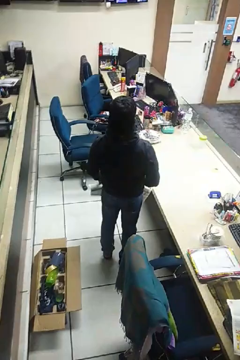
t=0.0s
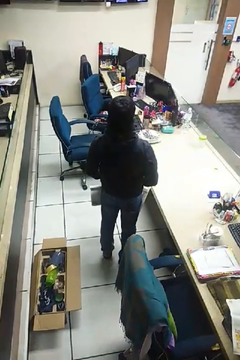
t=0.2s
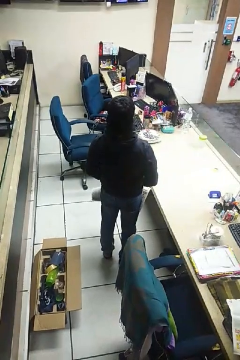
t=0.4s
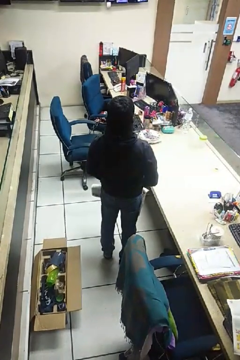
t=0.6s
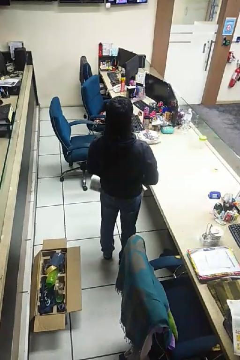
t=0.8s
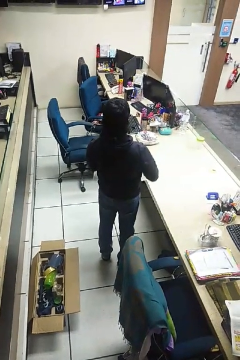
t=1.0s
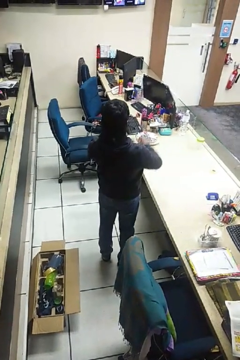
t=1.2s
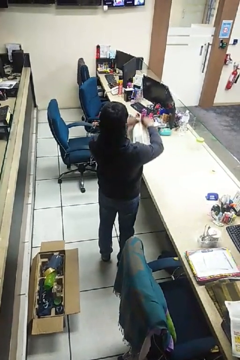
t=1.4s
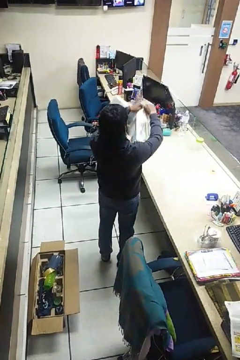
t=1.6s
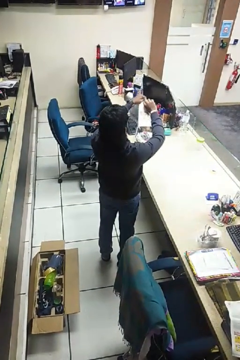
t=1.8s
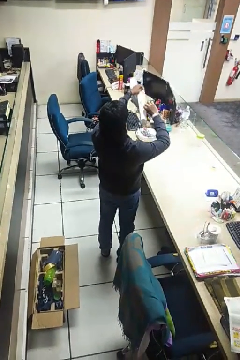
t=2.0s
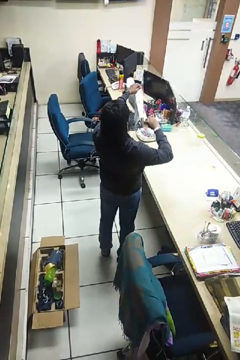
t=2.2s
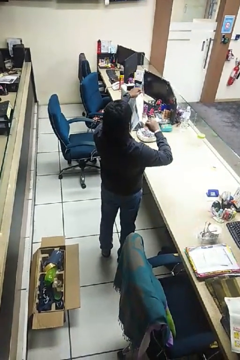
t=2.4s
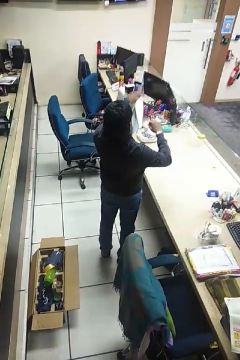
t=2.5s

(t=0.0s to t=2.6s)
person tears paper

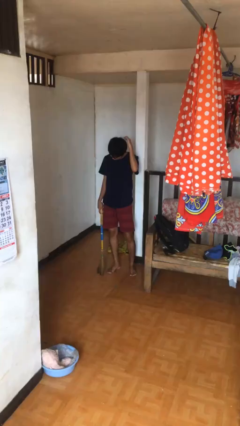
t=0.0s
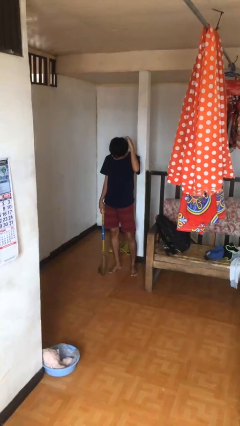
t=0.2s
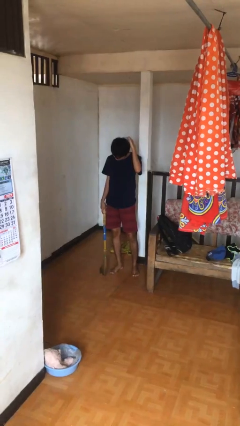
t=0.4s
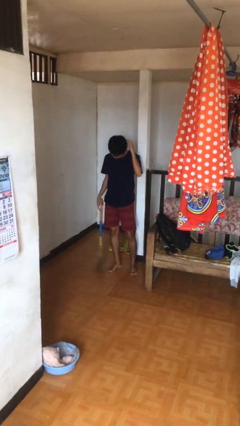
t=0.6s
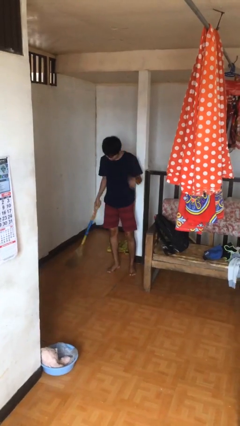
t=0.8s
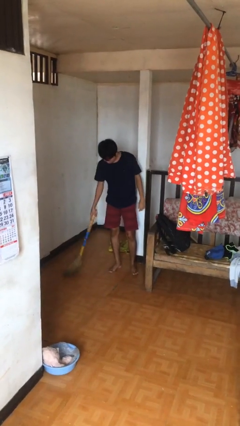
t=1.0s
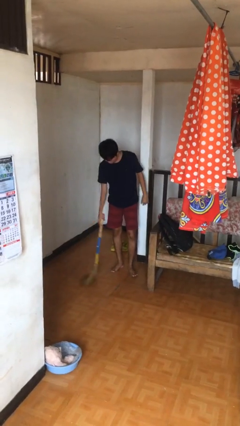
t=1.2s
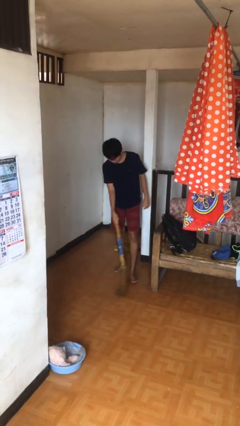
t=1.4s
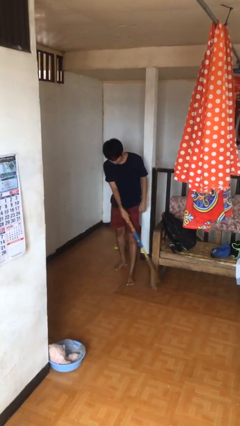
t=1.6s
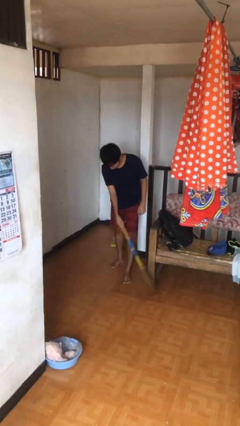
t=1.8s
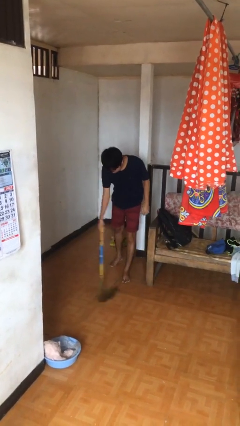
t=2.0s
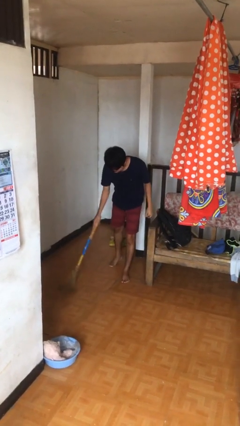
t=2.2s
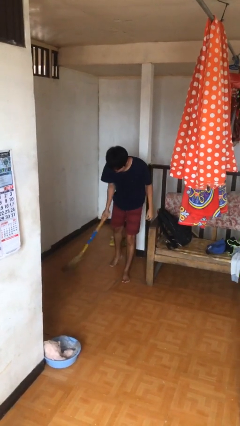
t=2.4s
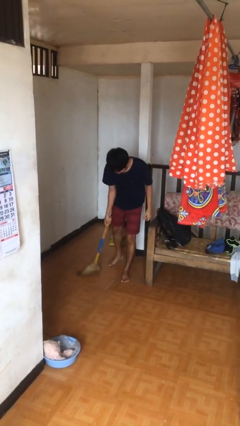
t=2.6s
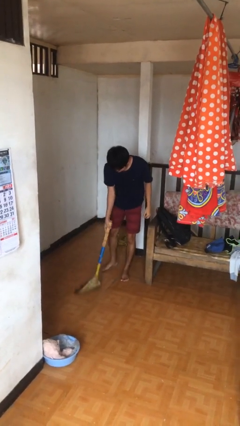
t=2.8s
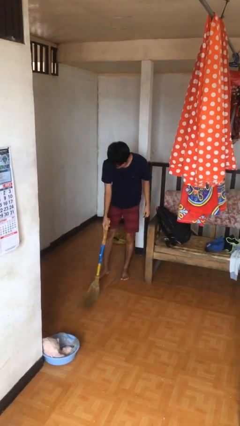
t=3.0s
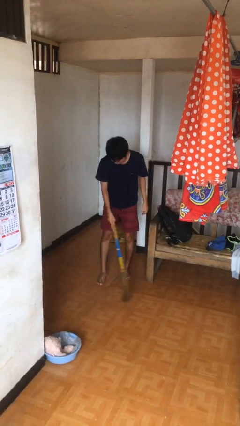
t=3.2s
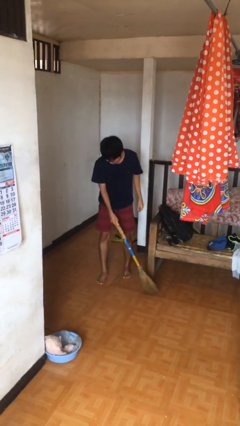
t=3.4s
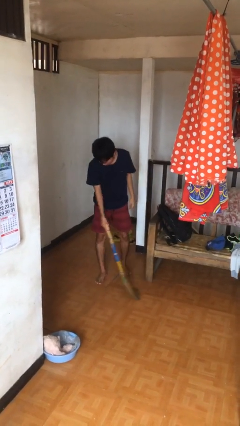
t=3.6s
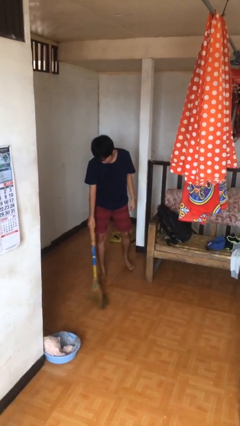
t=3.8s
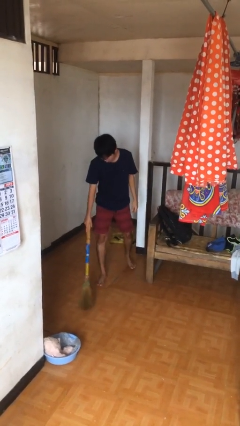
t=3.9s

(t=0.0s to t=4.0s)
person sweeps floor

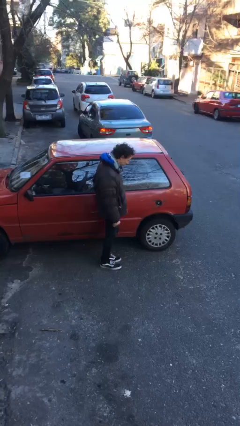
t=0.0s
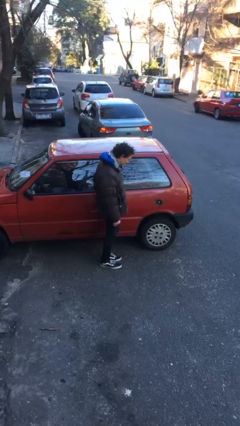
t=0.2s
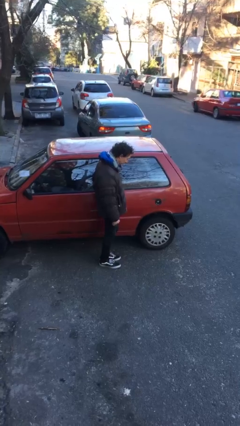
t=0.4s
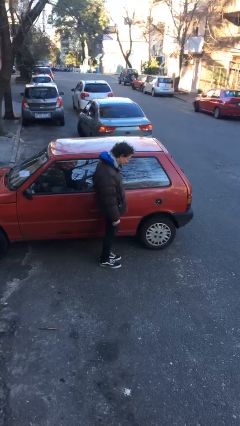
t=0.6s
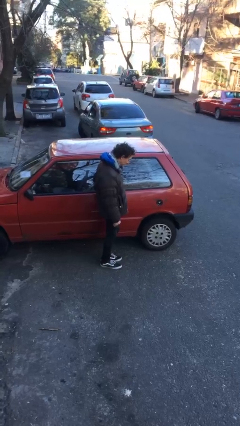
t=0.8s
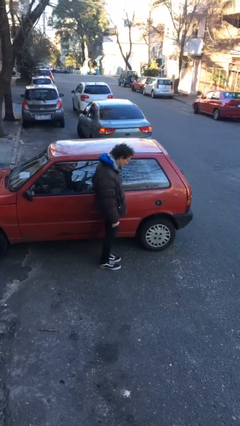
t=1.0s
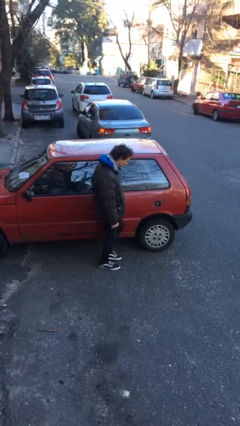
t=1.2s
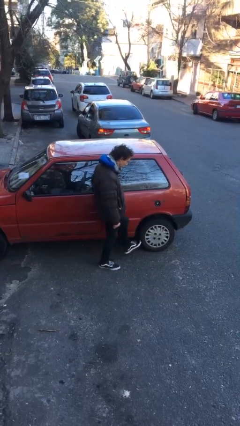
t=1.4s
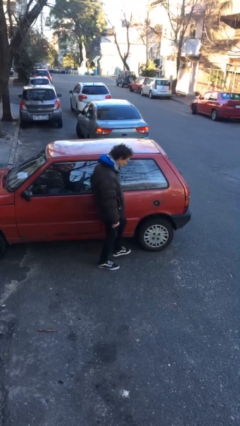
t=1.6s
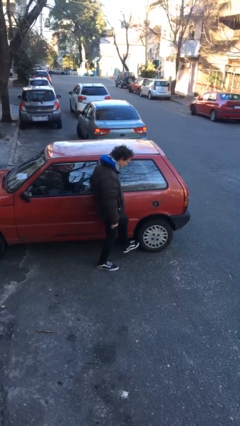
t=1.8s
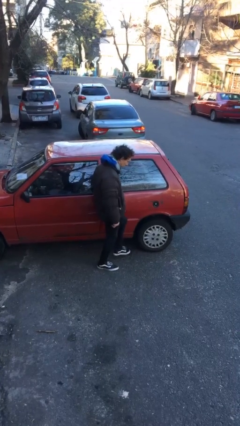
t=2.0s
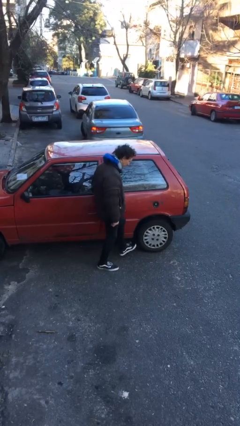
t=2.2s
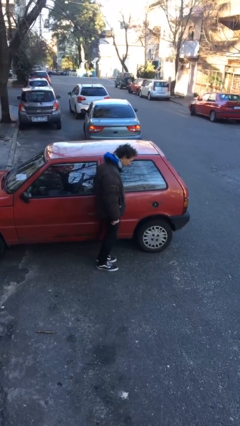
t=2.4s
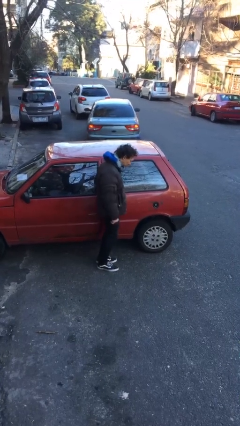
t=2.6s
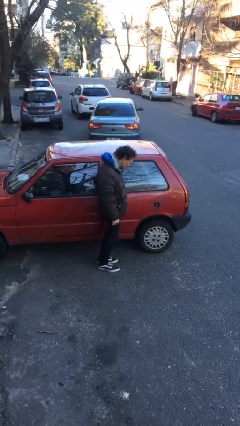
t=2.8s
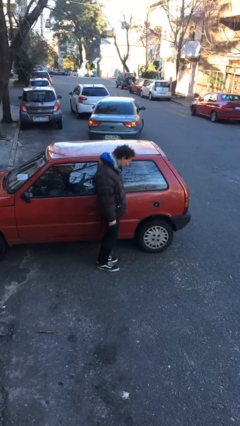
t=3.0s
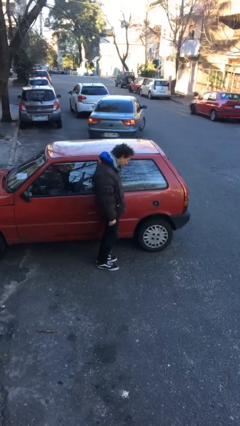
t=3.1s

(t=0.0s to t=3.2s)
person kicks car tires

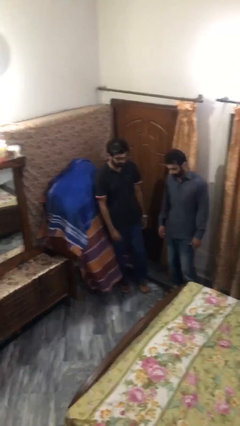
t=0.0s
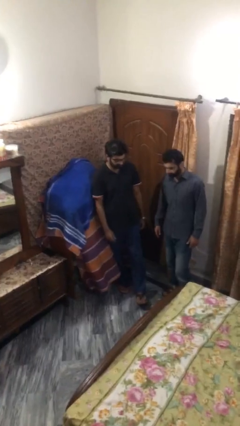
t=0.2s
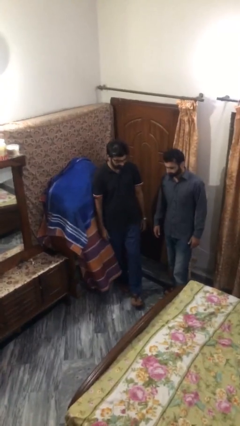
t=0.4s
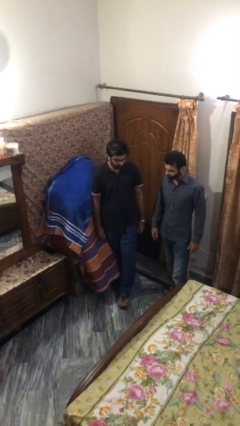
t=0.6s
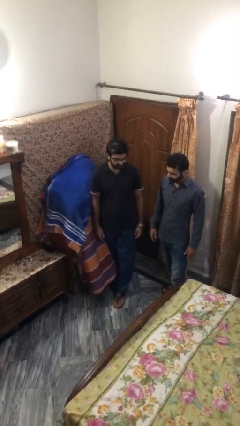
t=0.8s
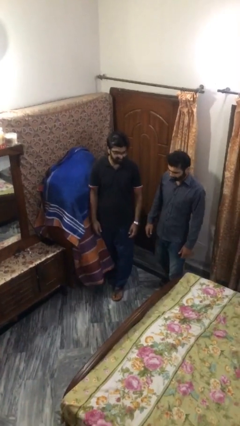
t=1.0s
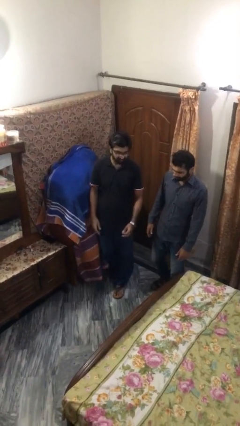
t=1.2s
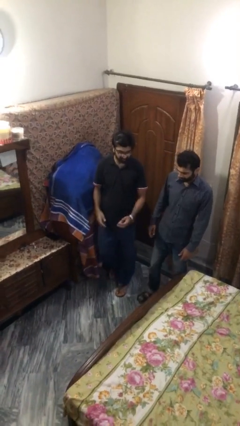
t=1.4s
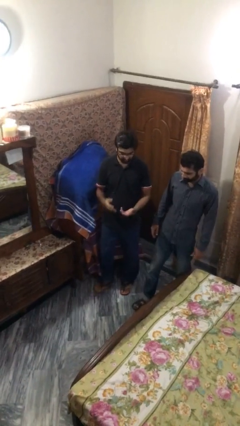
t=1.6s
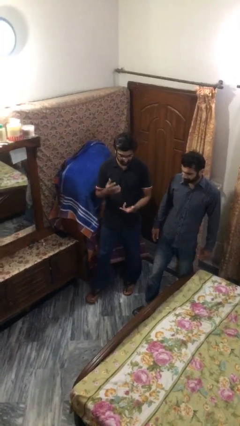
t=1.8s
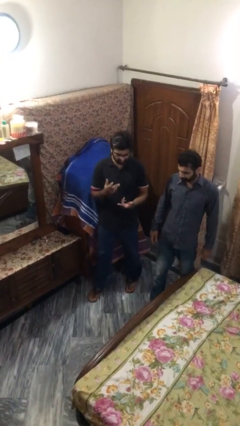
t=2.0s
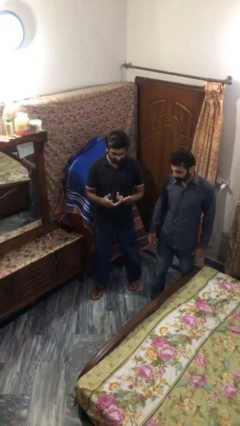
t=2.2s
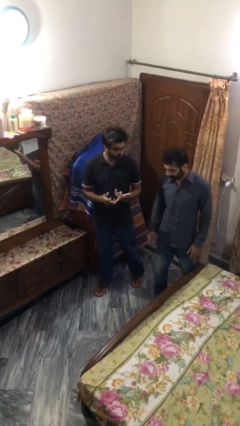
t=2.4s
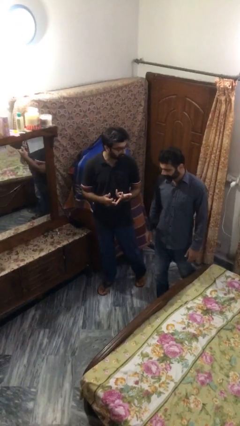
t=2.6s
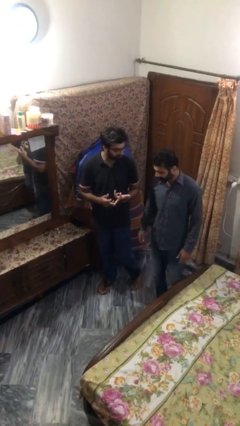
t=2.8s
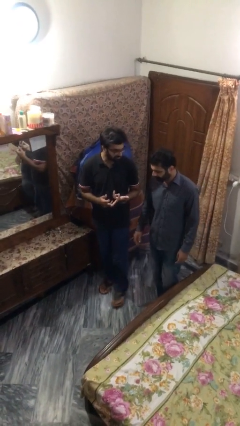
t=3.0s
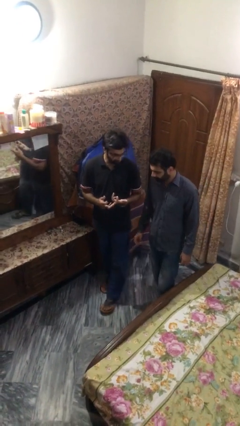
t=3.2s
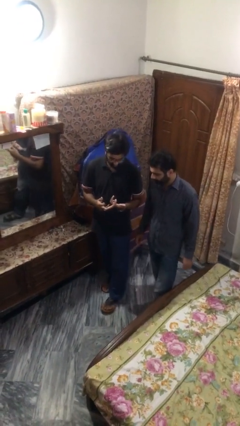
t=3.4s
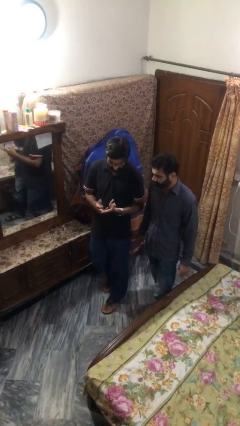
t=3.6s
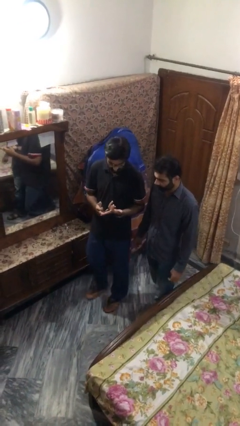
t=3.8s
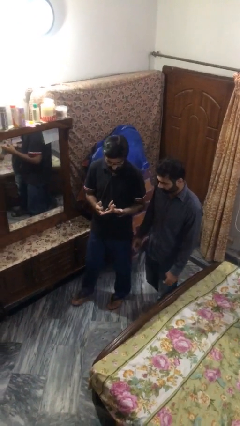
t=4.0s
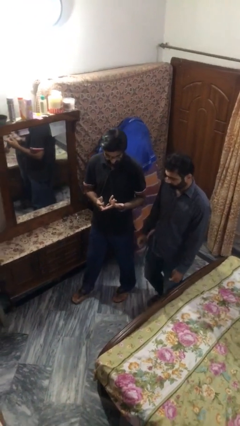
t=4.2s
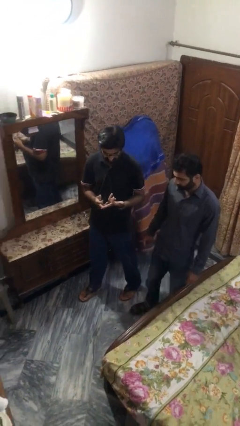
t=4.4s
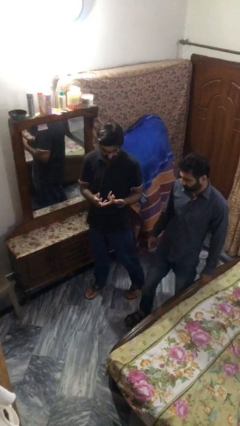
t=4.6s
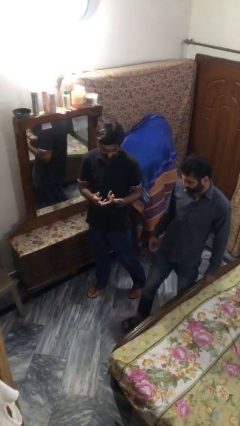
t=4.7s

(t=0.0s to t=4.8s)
person talks to person

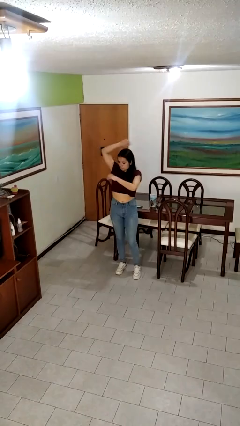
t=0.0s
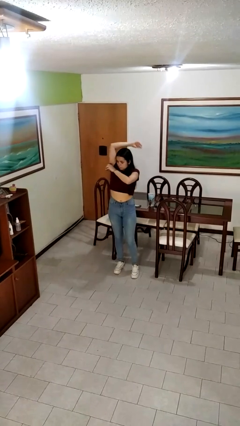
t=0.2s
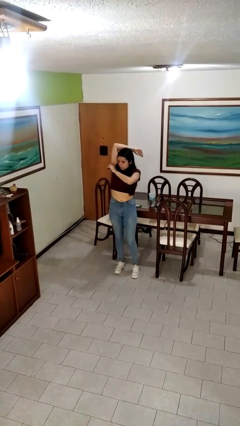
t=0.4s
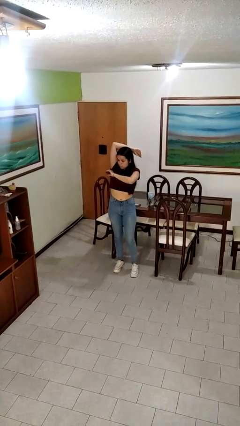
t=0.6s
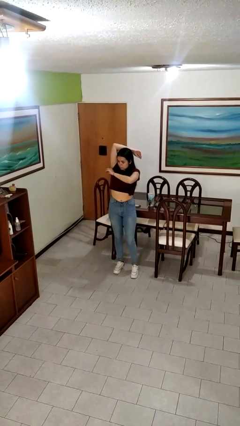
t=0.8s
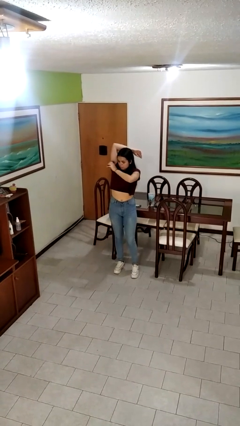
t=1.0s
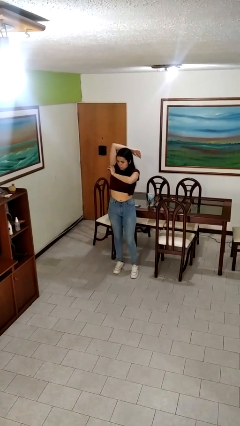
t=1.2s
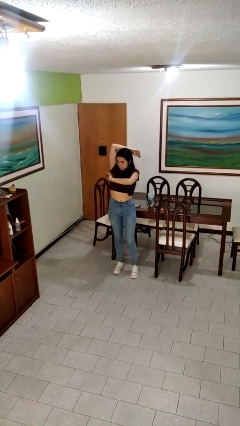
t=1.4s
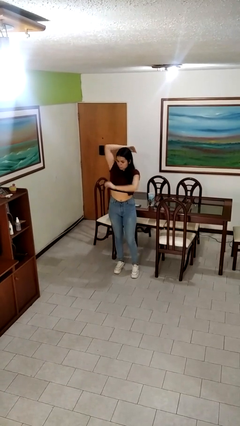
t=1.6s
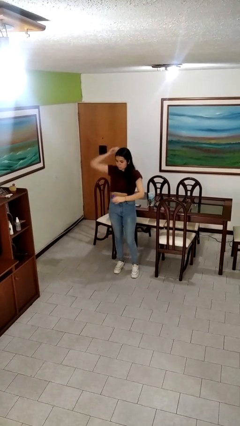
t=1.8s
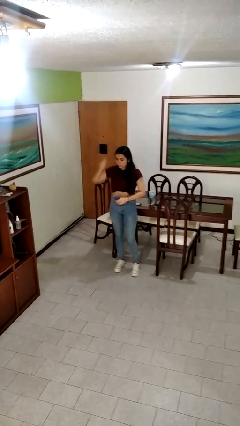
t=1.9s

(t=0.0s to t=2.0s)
person applies deodorant

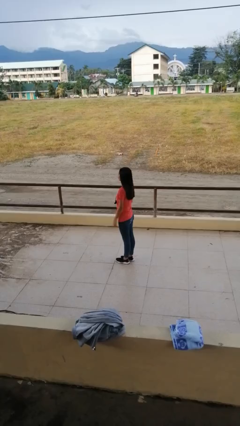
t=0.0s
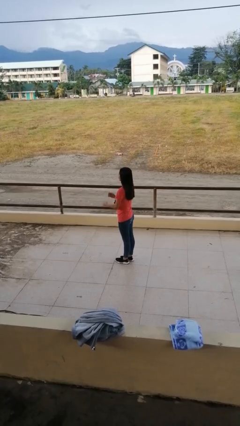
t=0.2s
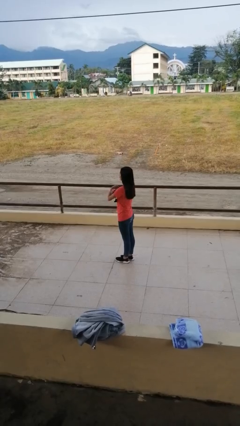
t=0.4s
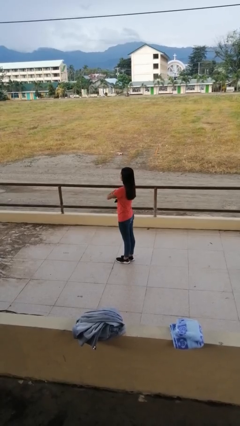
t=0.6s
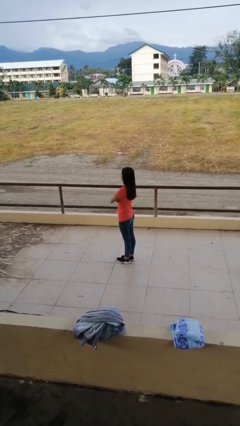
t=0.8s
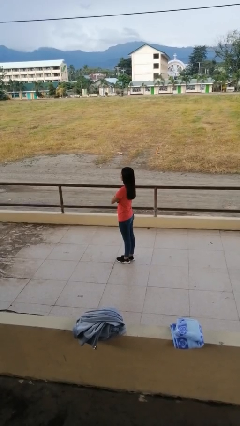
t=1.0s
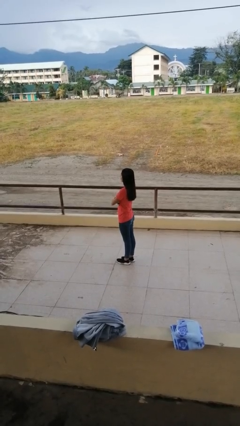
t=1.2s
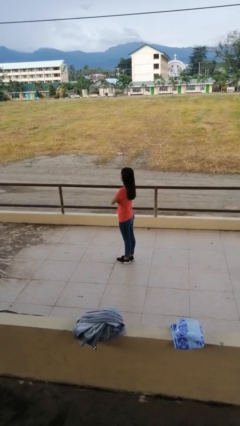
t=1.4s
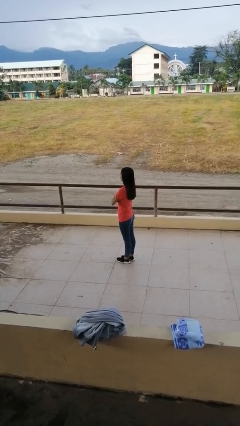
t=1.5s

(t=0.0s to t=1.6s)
person crosses arms
